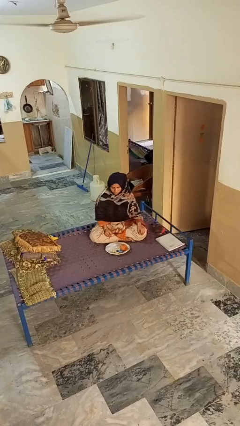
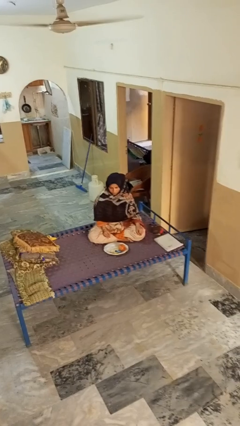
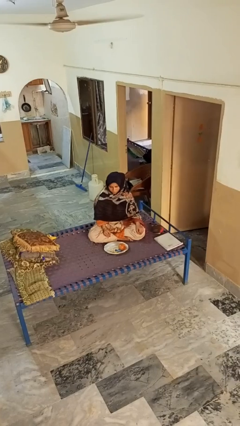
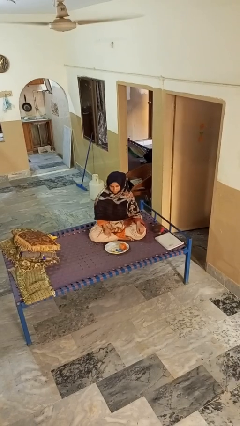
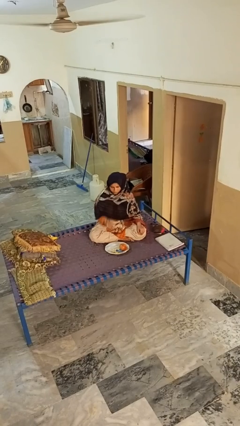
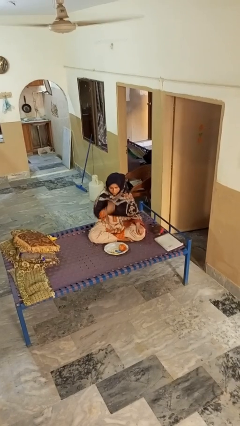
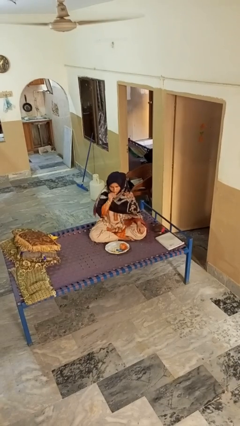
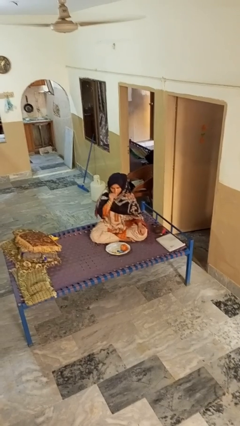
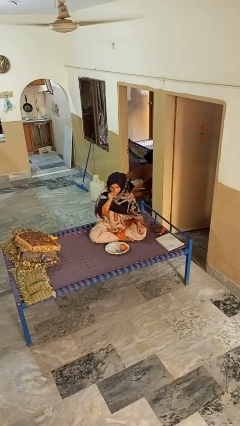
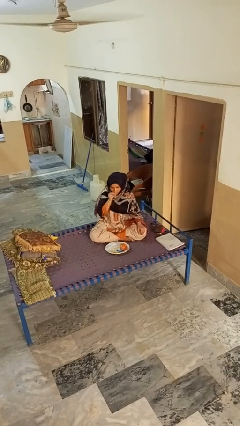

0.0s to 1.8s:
person eats apple

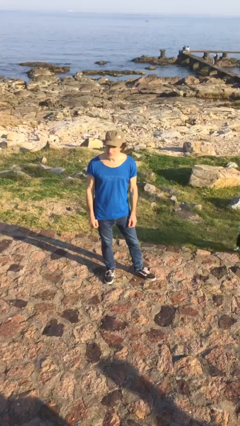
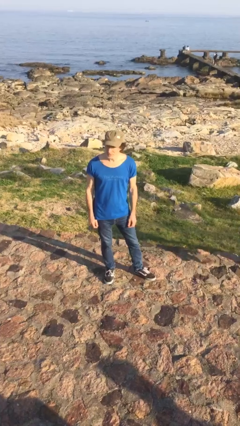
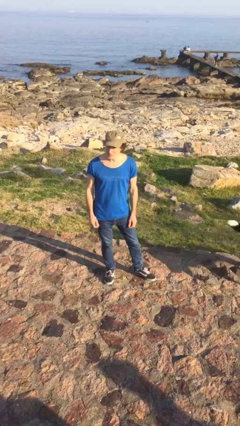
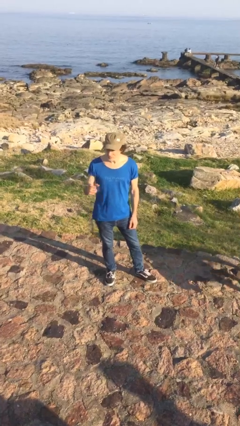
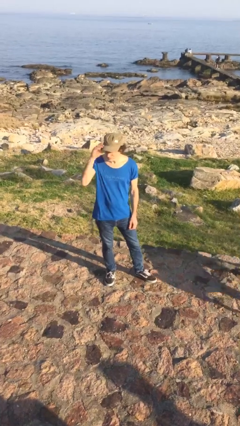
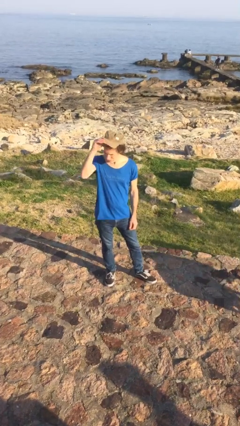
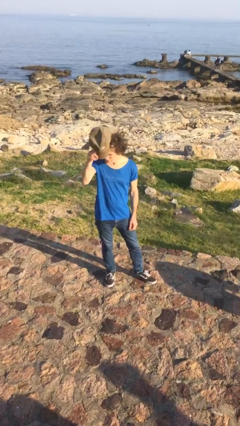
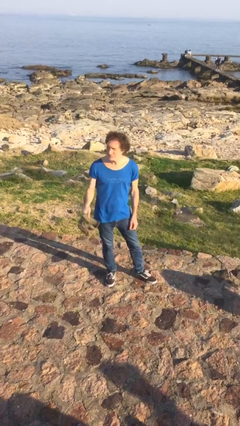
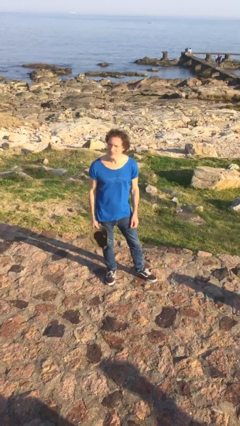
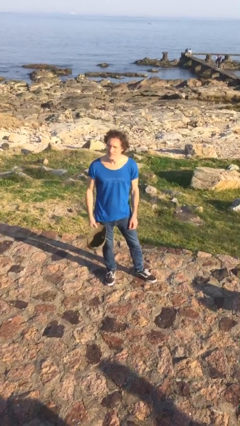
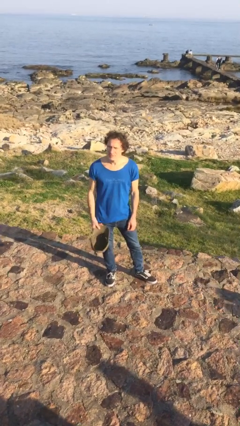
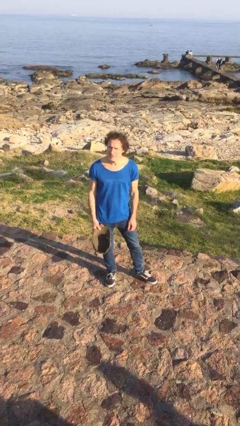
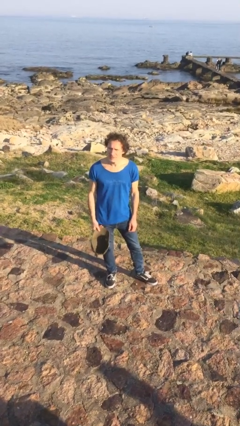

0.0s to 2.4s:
person takes off hat

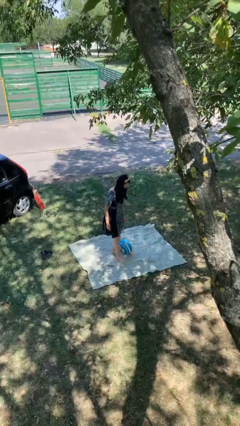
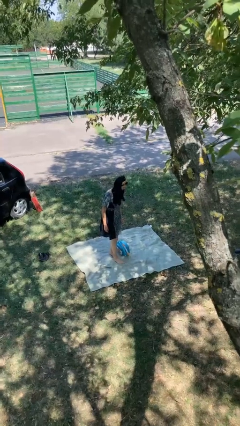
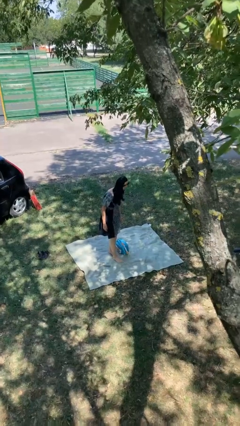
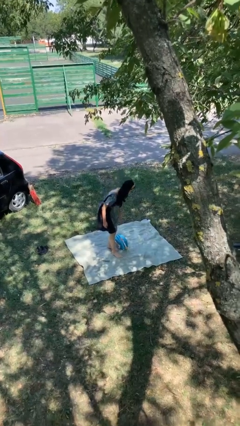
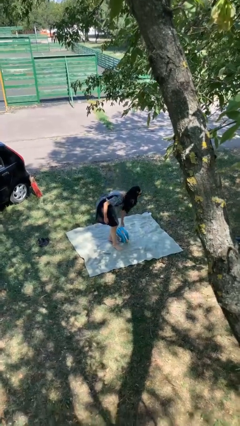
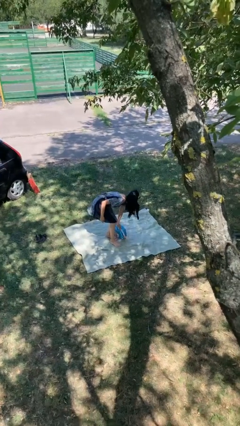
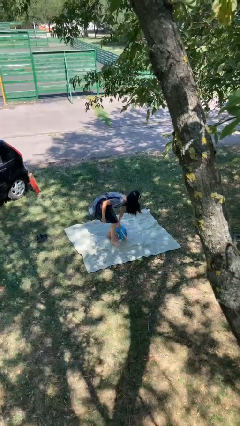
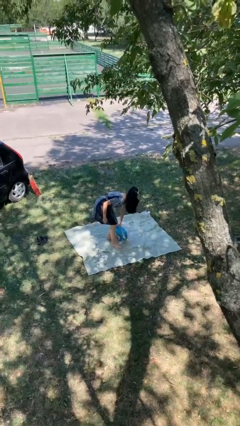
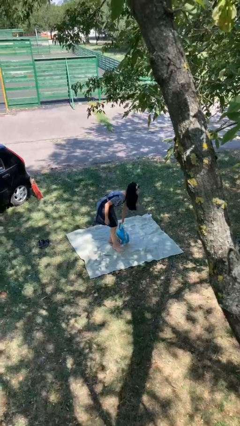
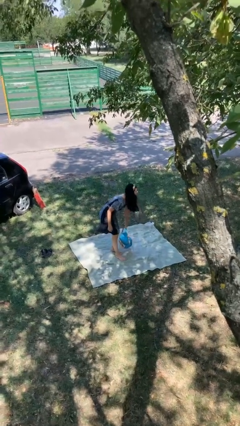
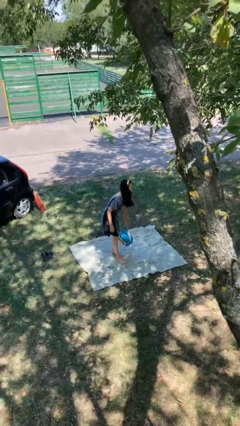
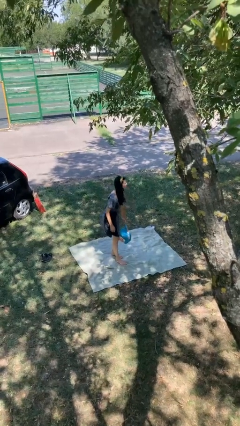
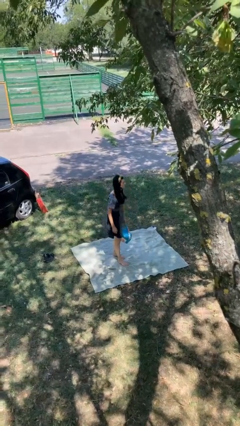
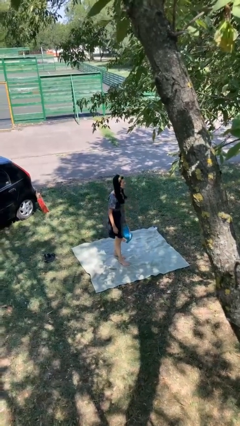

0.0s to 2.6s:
person picks up object from floor

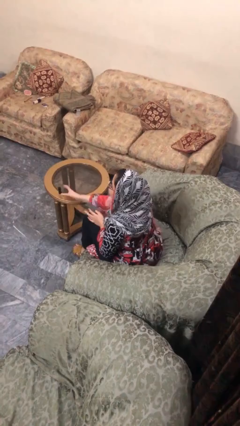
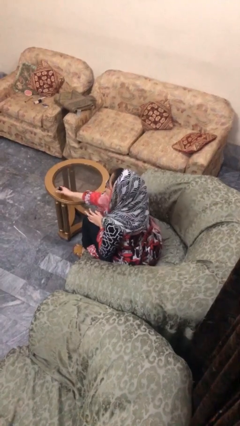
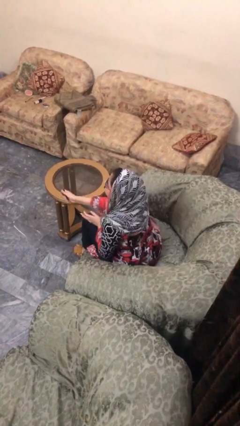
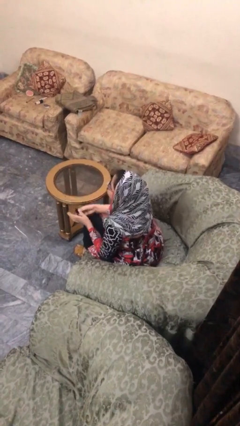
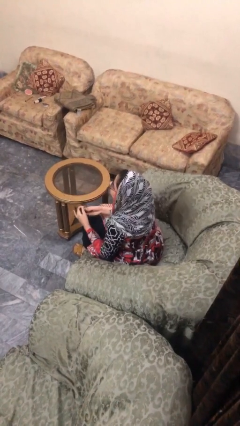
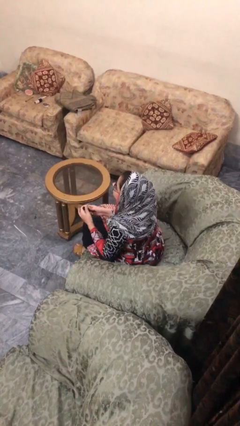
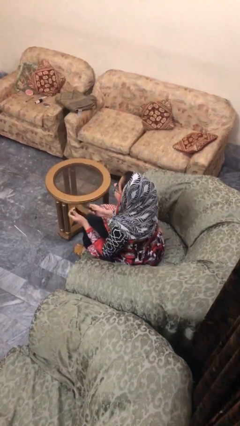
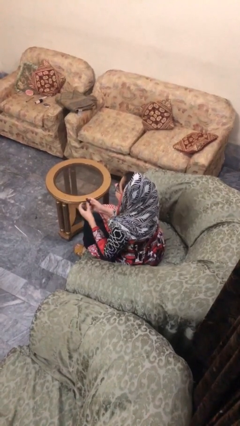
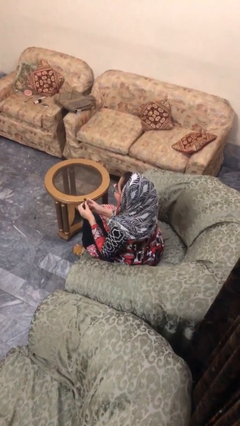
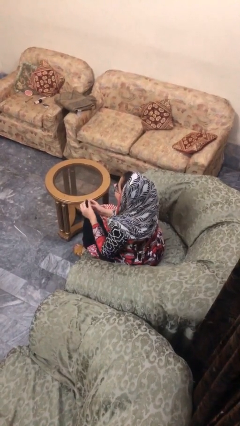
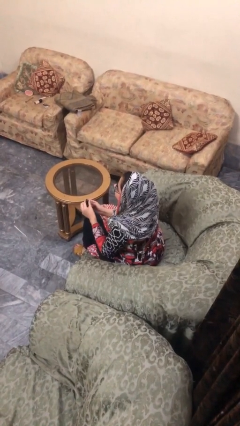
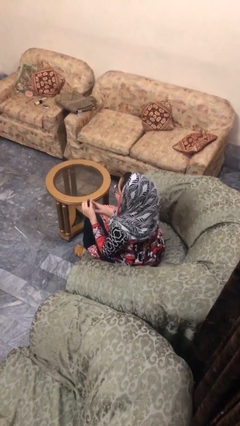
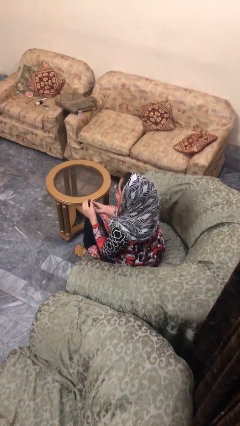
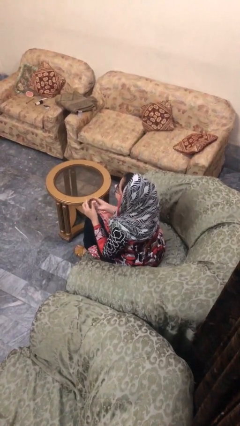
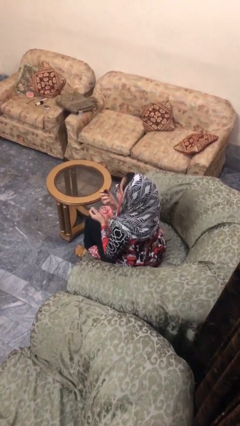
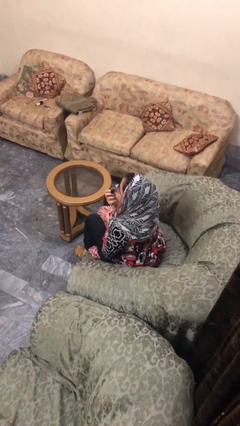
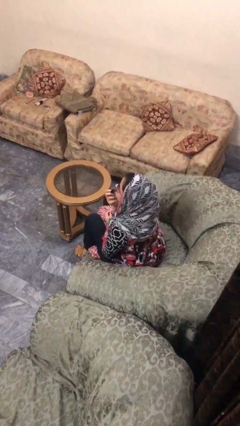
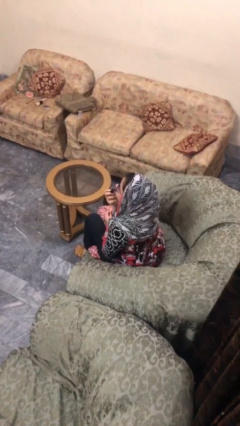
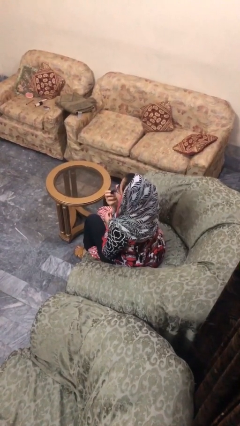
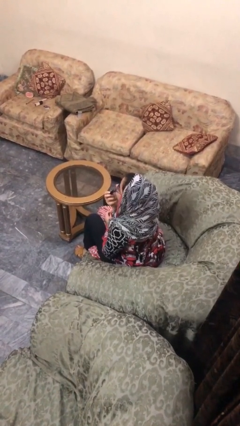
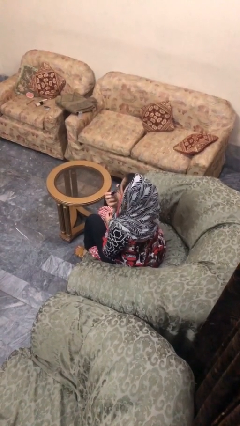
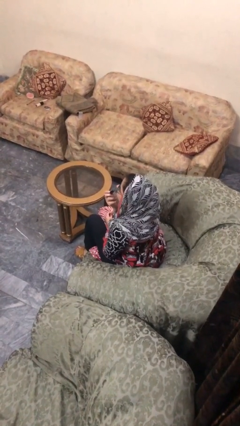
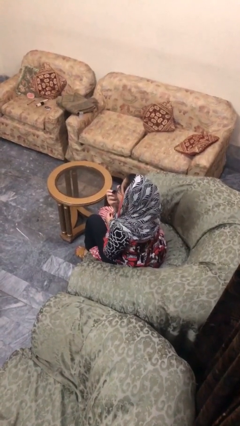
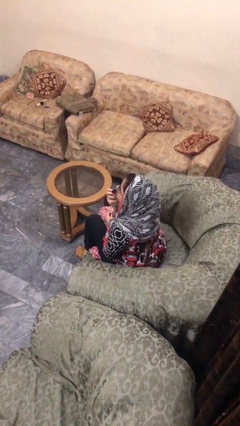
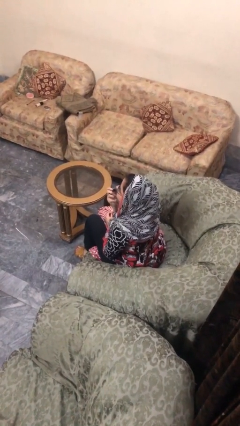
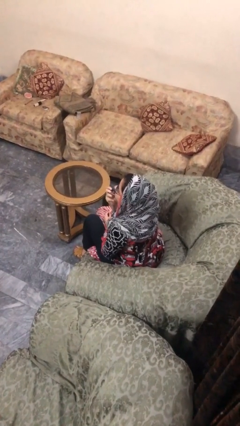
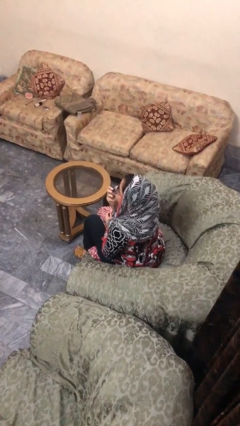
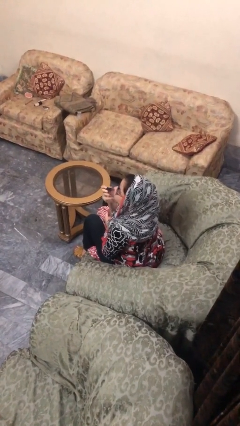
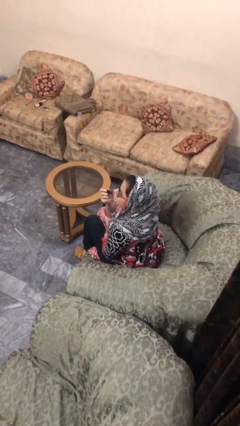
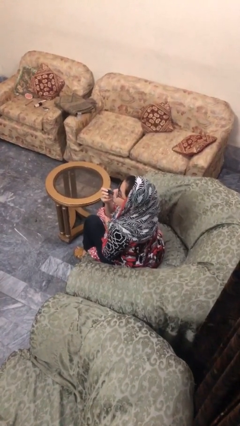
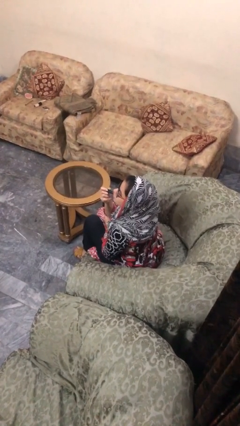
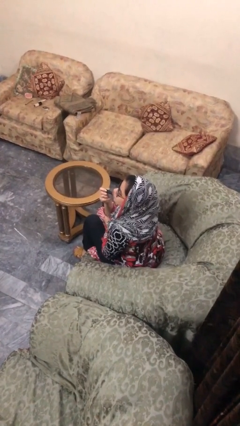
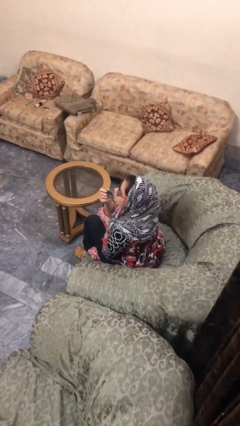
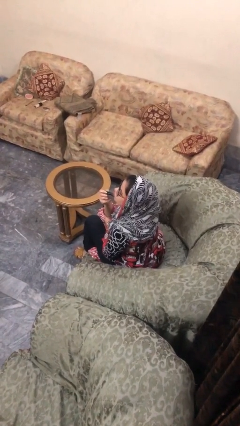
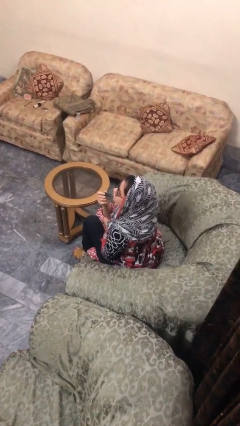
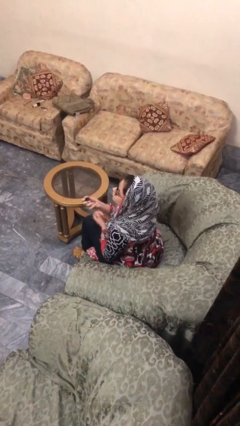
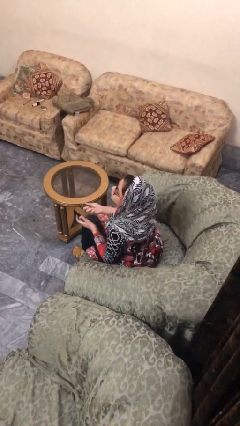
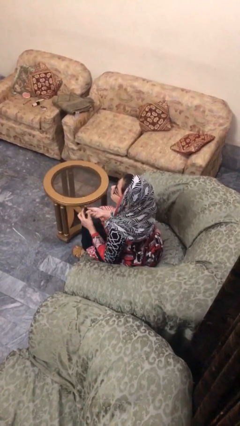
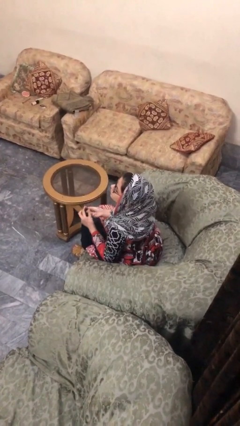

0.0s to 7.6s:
person applies lip makeup

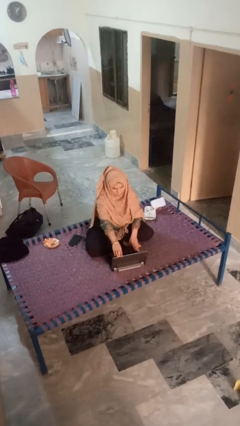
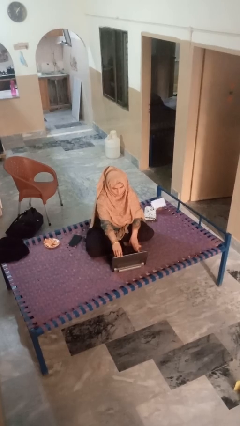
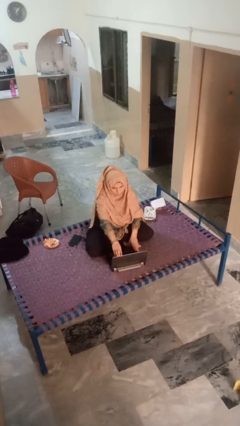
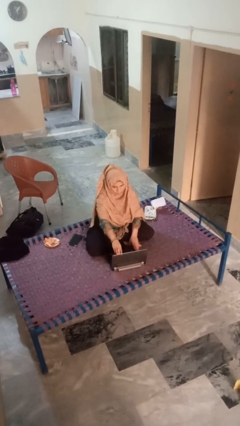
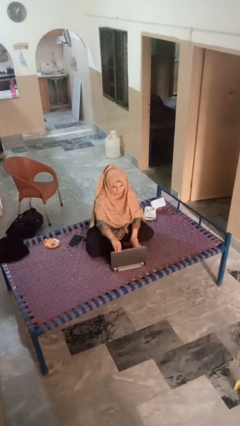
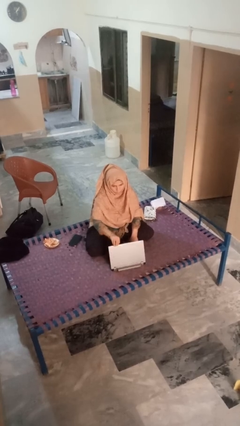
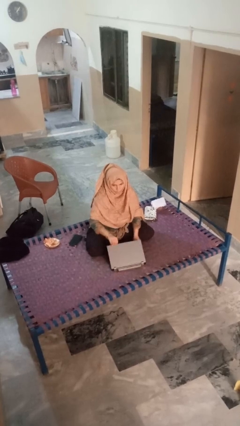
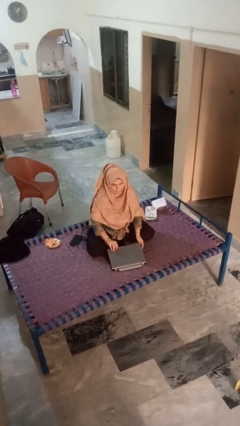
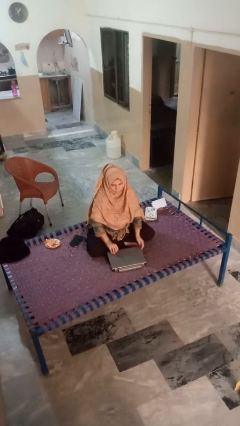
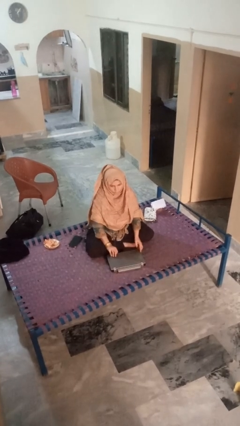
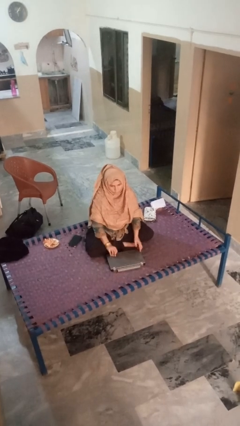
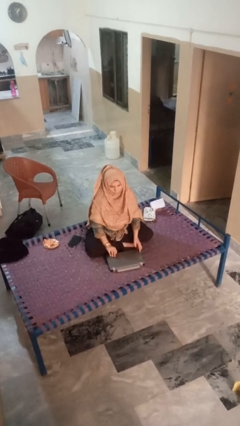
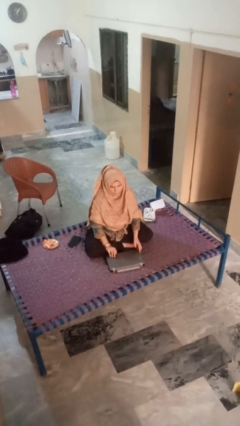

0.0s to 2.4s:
person closes laptop

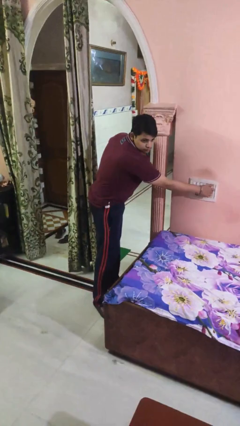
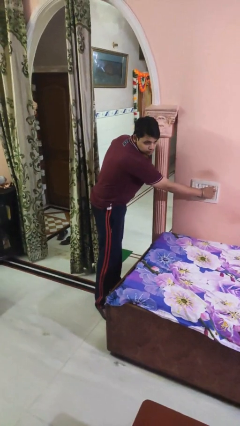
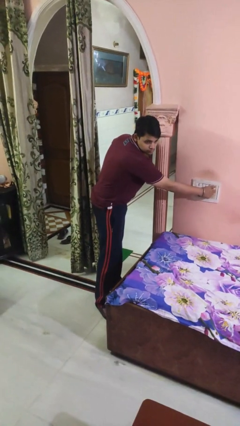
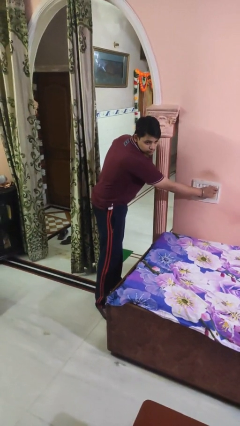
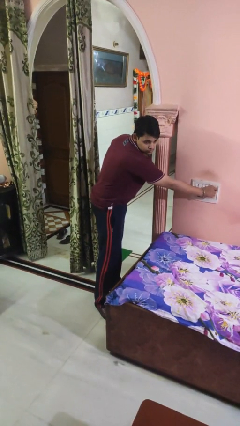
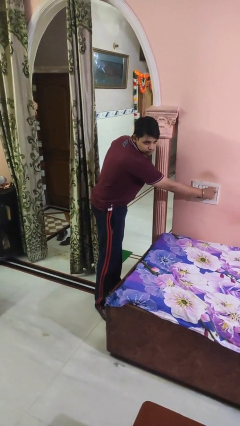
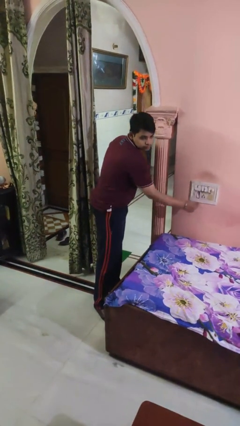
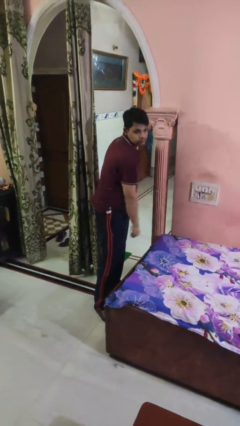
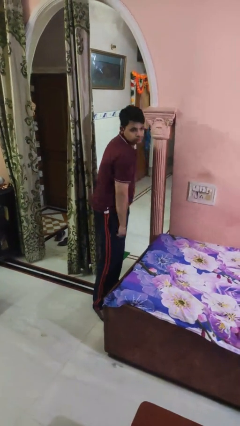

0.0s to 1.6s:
person adjusts thermostat
